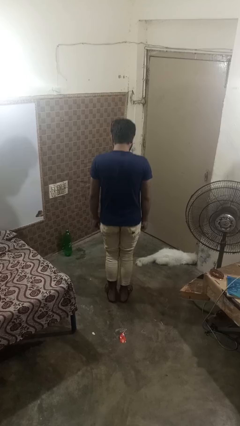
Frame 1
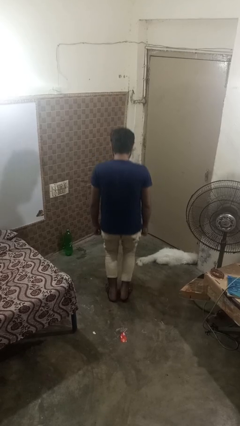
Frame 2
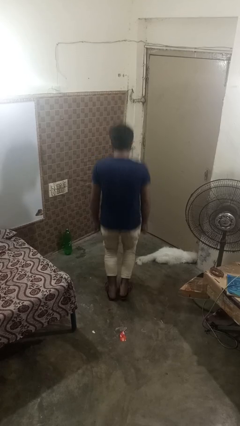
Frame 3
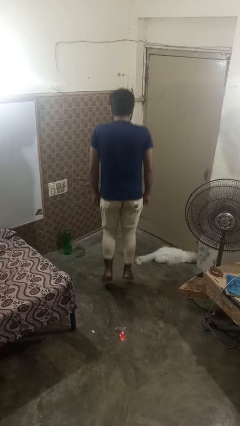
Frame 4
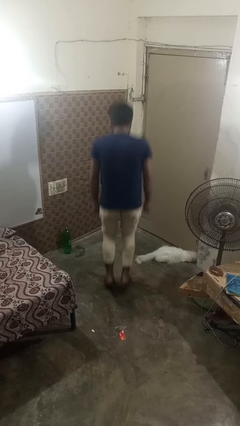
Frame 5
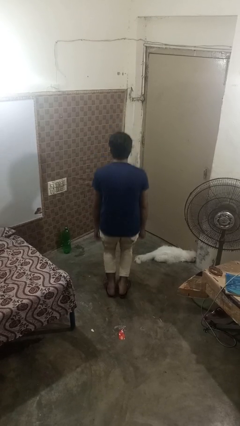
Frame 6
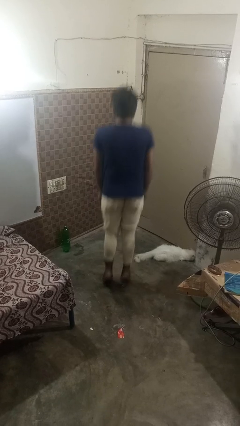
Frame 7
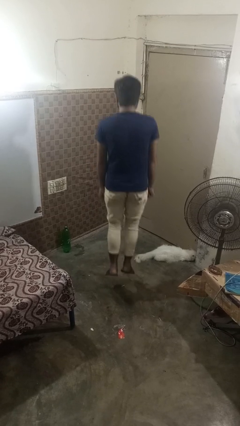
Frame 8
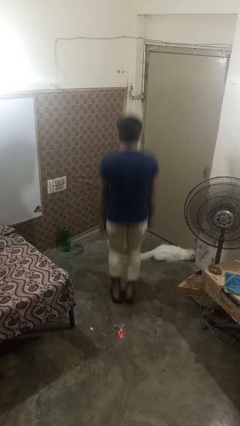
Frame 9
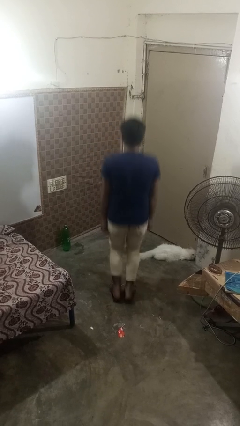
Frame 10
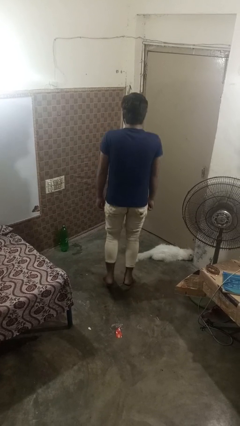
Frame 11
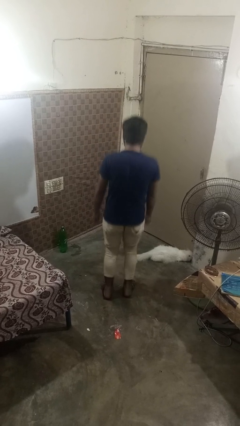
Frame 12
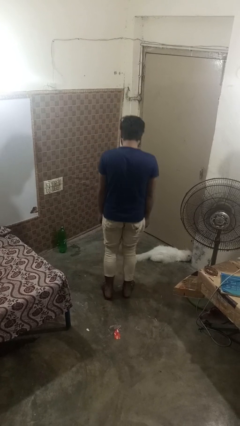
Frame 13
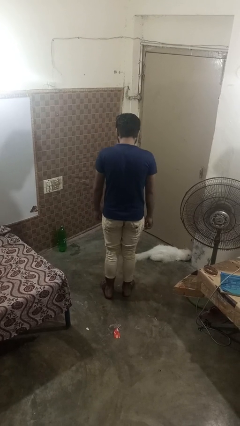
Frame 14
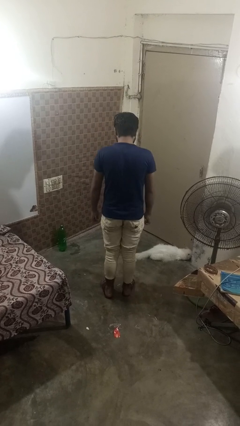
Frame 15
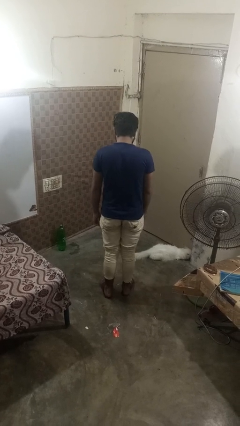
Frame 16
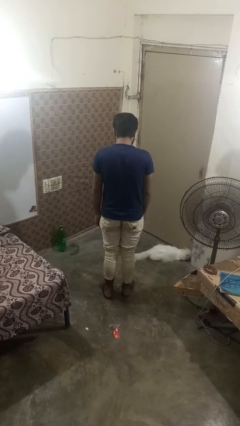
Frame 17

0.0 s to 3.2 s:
person jumps

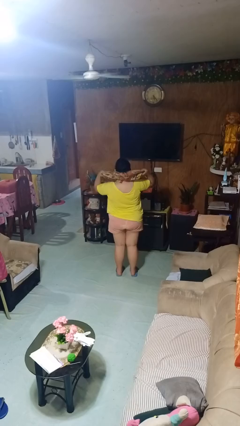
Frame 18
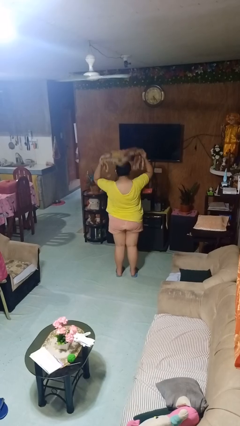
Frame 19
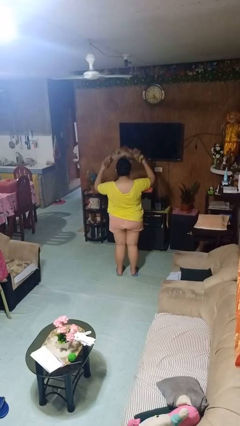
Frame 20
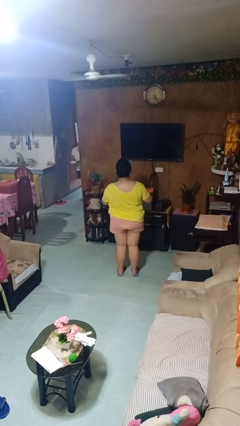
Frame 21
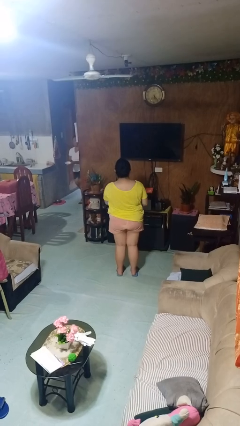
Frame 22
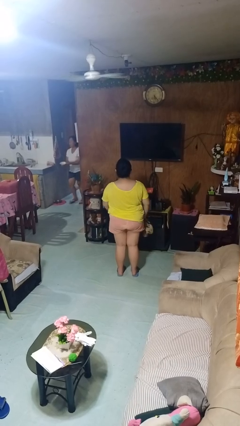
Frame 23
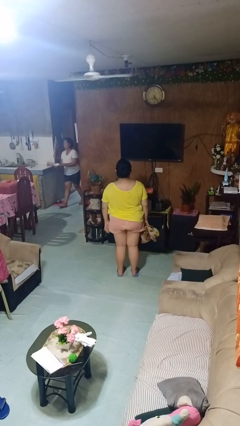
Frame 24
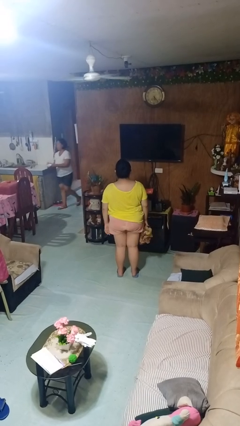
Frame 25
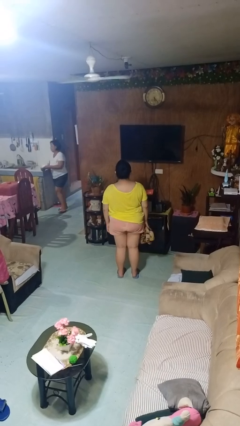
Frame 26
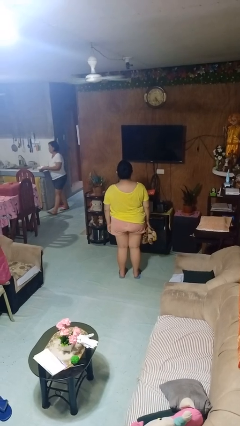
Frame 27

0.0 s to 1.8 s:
person takes off scarf

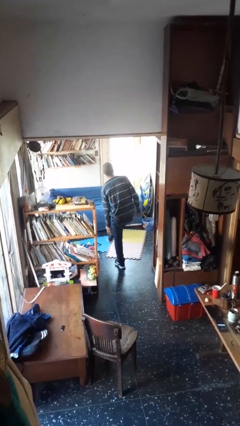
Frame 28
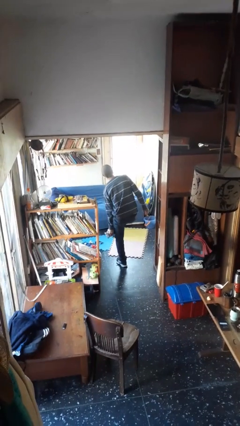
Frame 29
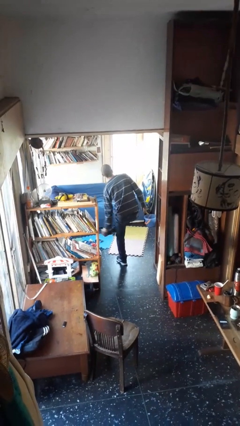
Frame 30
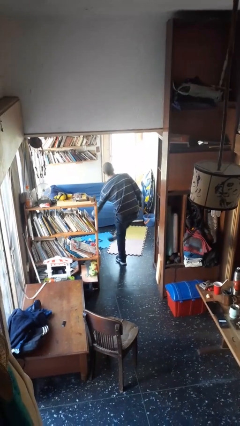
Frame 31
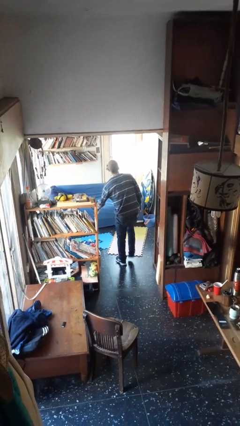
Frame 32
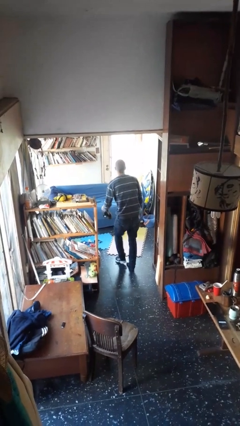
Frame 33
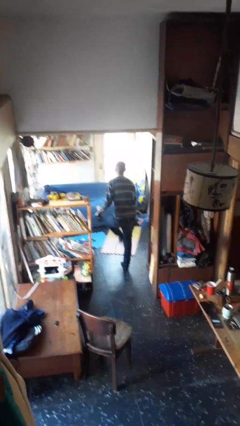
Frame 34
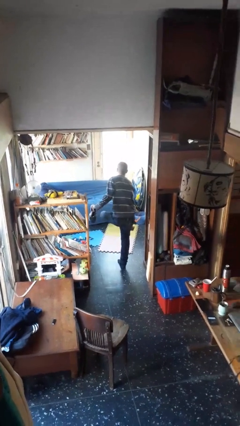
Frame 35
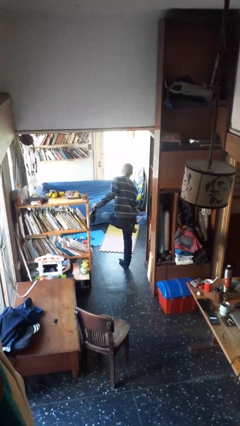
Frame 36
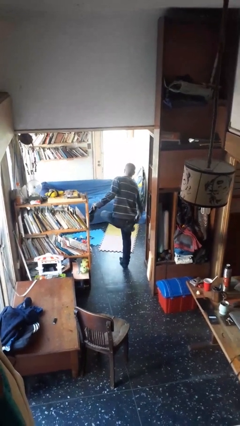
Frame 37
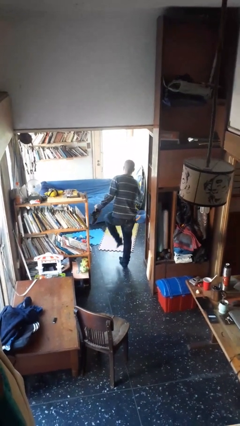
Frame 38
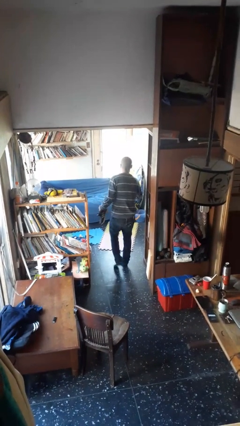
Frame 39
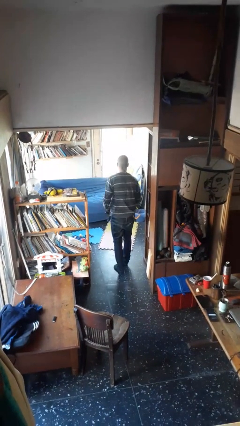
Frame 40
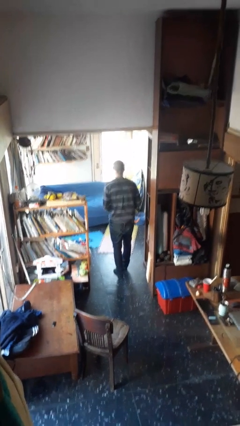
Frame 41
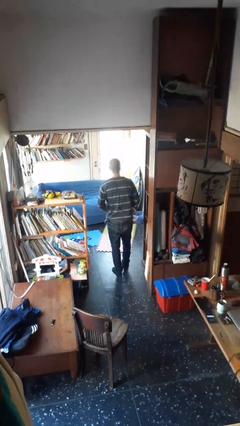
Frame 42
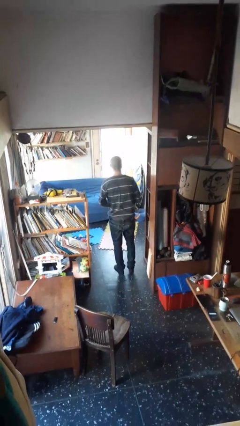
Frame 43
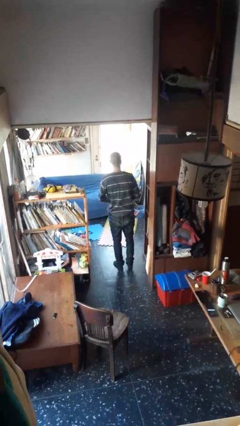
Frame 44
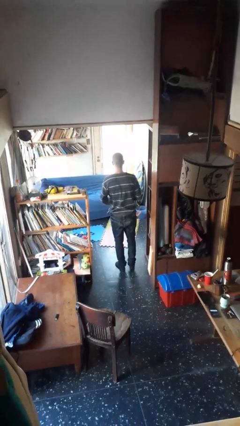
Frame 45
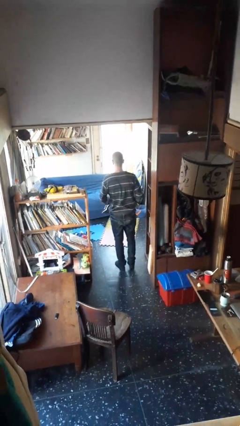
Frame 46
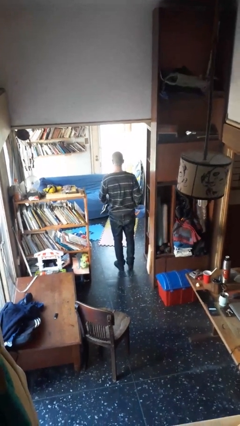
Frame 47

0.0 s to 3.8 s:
person takes off shoes

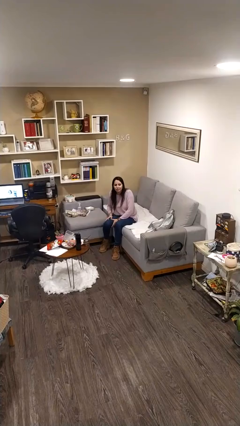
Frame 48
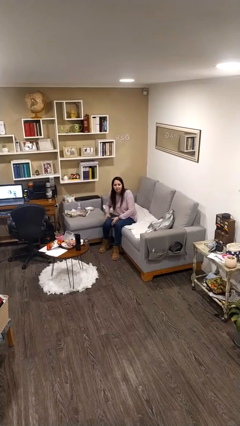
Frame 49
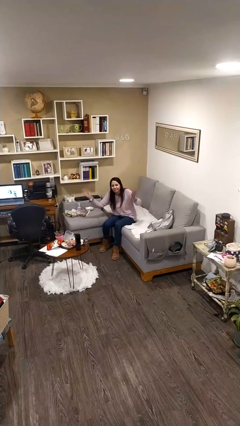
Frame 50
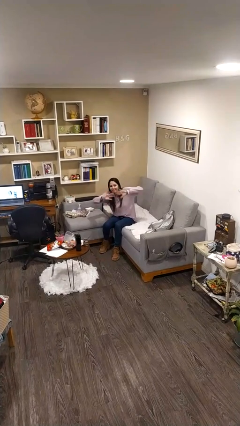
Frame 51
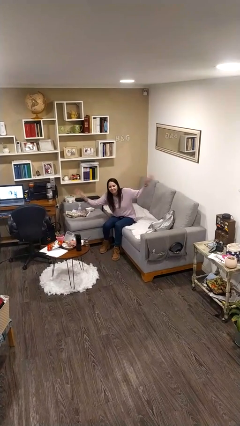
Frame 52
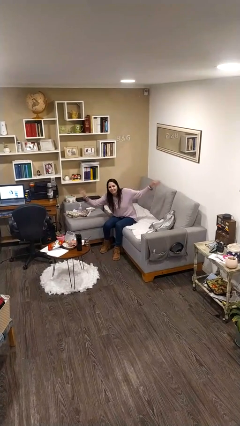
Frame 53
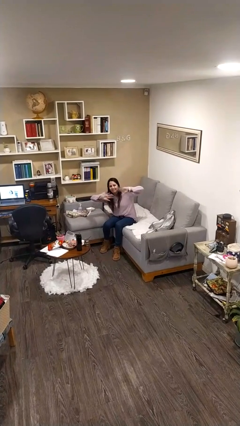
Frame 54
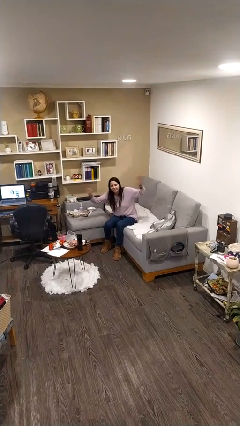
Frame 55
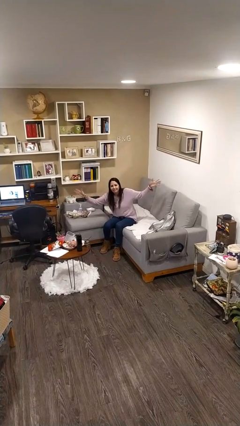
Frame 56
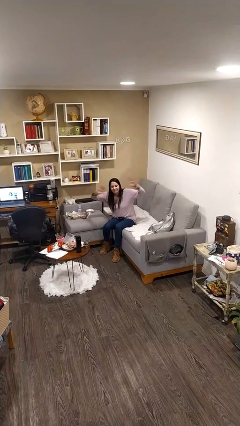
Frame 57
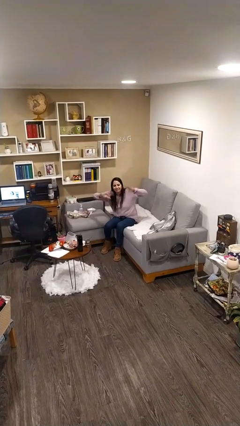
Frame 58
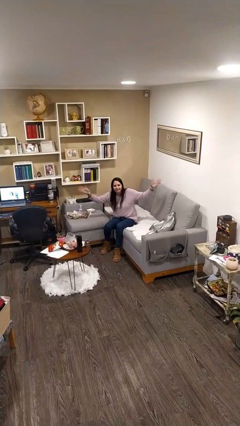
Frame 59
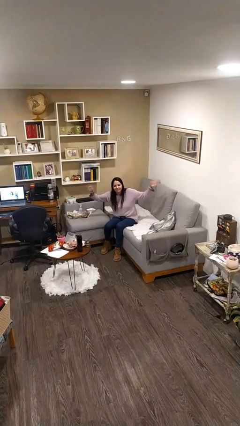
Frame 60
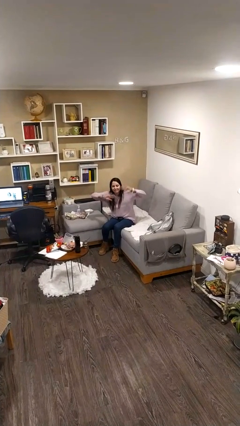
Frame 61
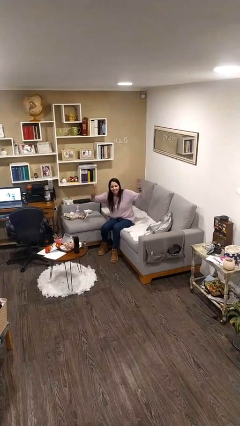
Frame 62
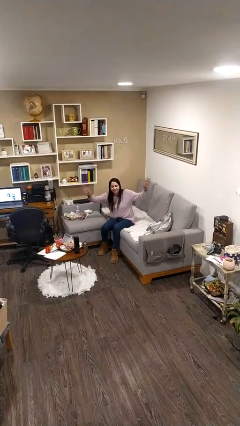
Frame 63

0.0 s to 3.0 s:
person waves at person

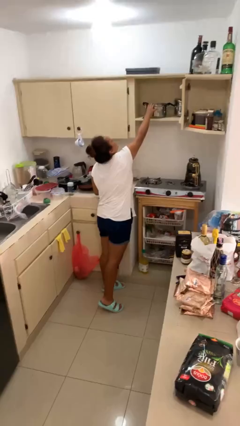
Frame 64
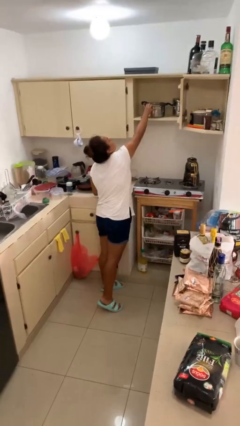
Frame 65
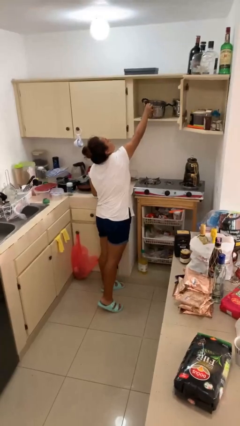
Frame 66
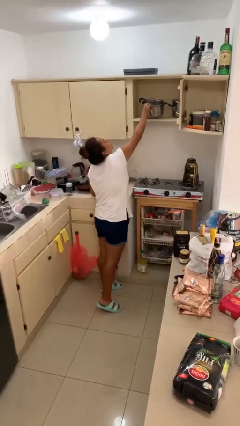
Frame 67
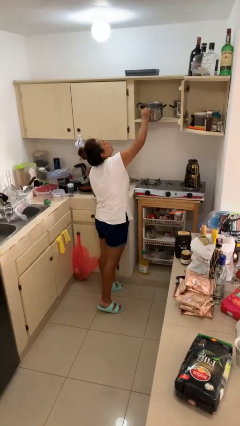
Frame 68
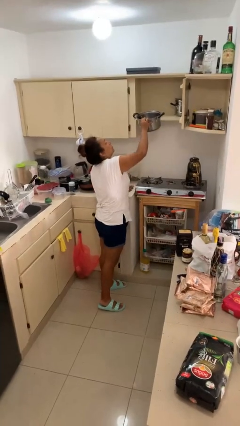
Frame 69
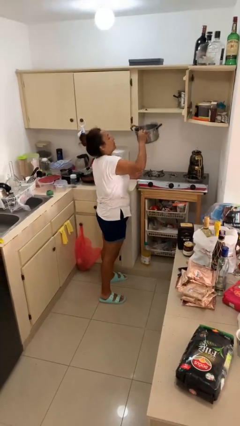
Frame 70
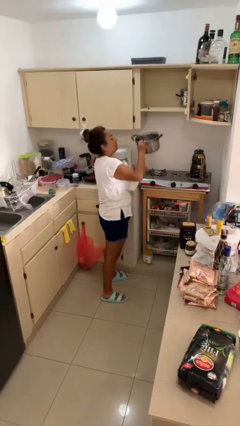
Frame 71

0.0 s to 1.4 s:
person picks up object from cabinet

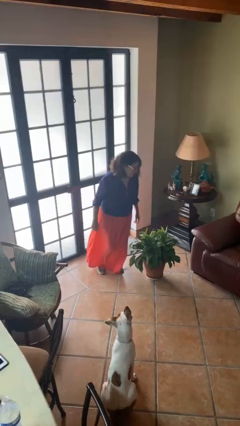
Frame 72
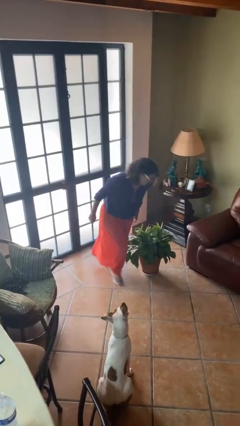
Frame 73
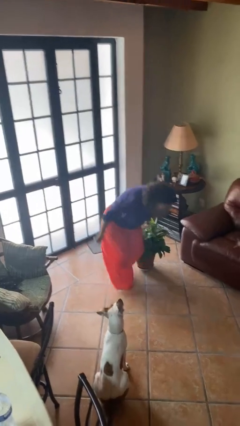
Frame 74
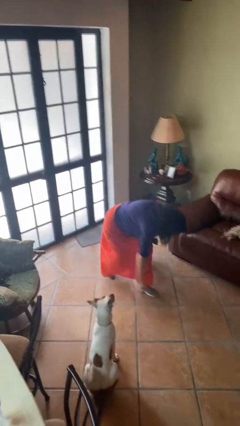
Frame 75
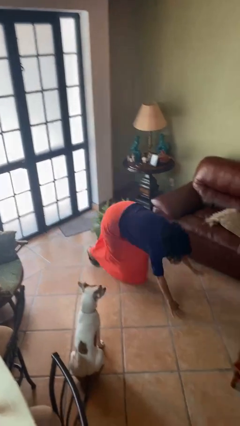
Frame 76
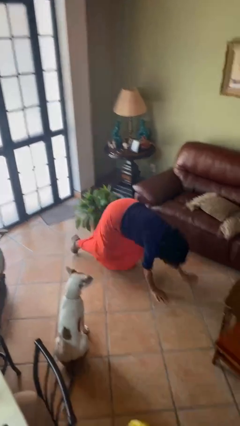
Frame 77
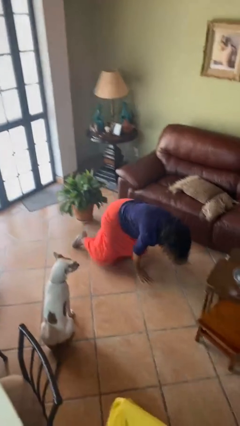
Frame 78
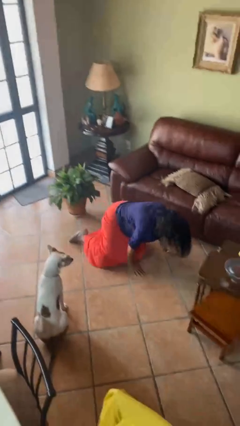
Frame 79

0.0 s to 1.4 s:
person trips on object on floor

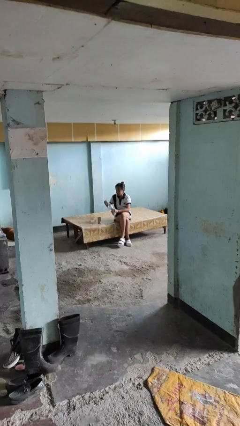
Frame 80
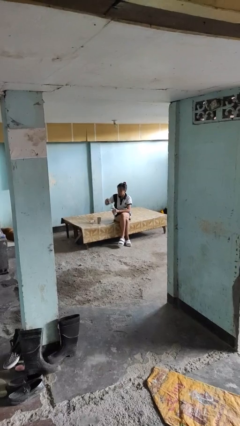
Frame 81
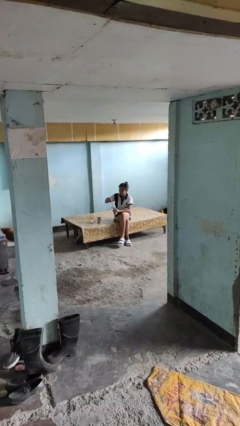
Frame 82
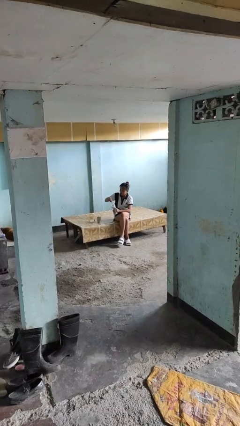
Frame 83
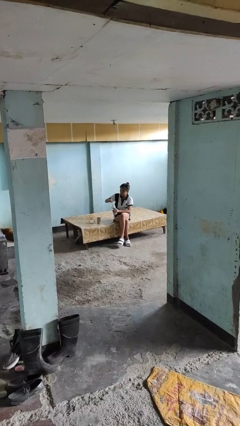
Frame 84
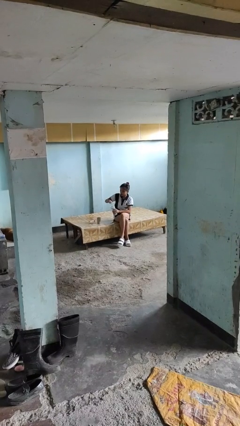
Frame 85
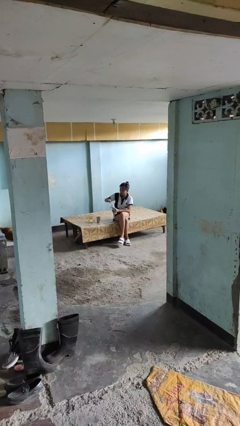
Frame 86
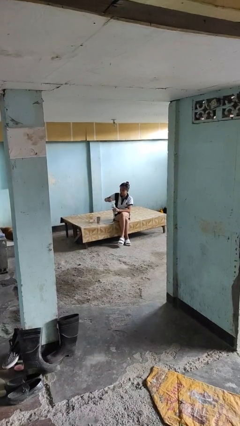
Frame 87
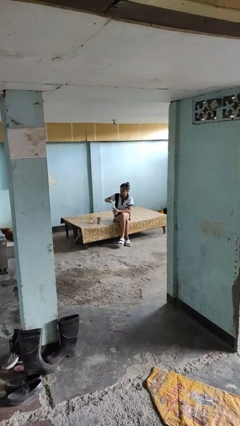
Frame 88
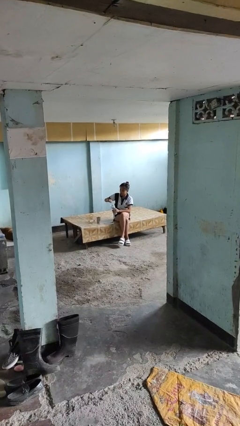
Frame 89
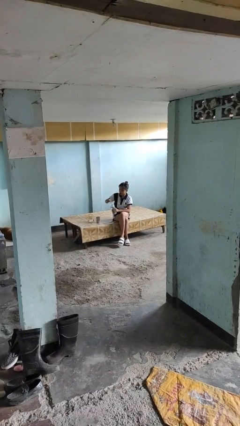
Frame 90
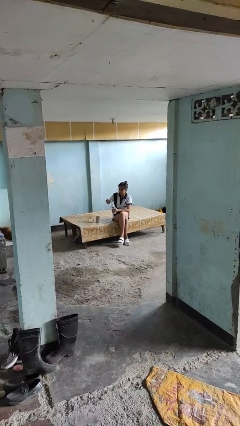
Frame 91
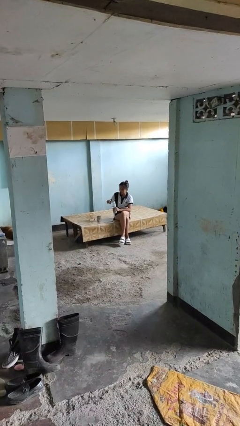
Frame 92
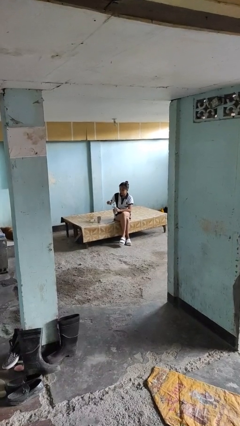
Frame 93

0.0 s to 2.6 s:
person screws lid to bottle
